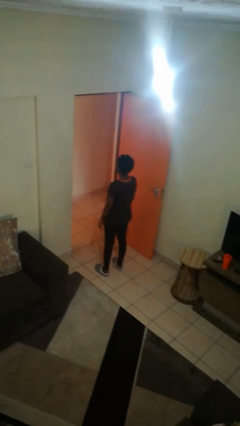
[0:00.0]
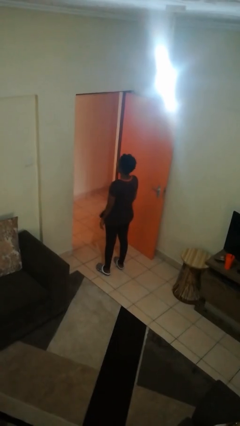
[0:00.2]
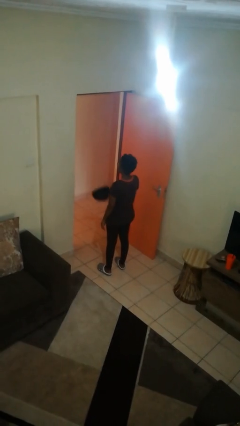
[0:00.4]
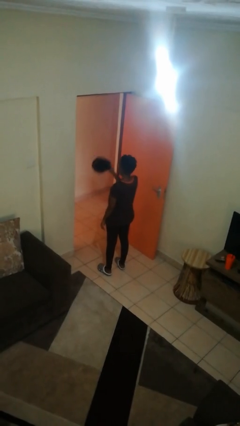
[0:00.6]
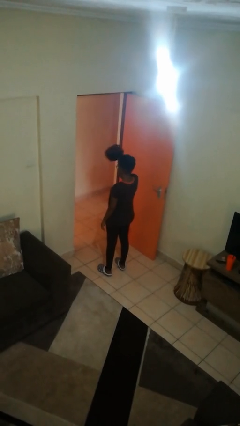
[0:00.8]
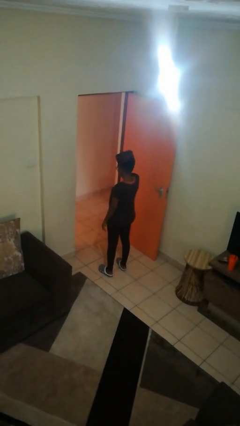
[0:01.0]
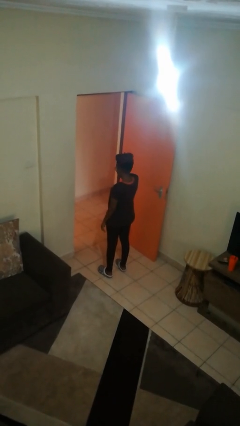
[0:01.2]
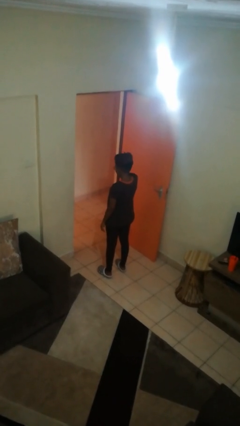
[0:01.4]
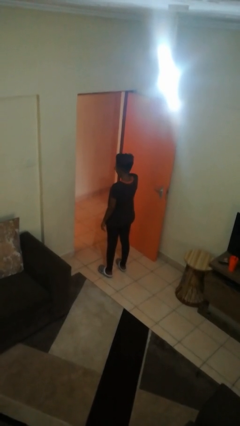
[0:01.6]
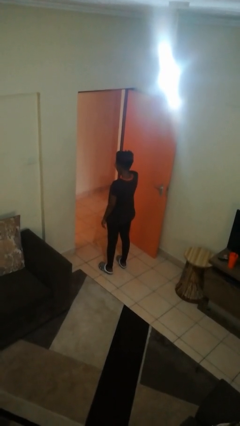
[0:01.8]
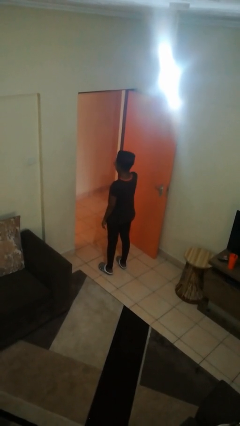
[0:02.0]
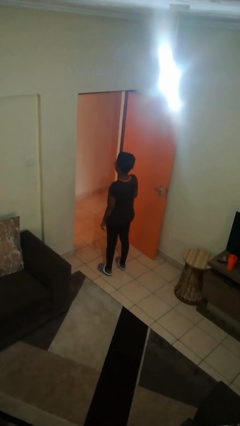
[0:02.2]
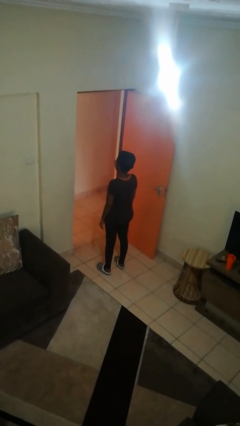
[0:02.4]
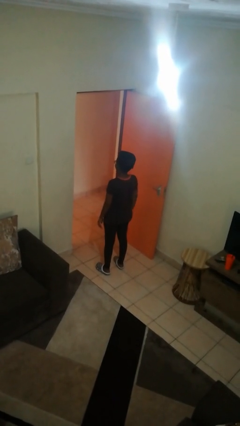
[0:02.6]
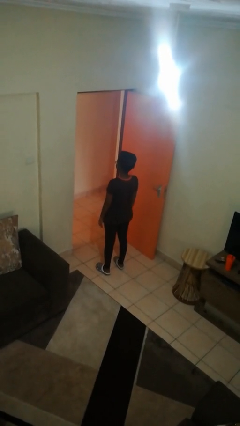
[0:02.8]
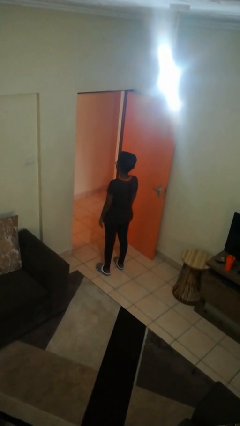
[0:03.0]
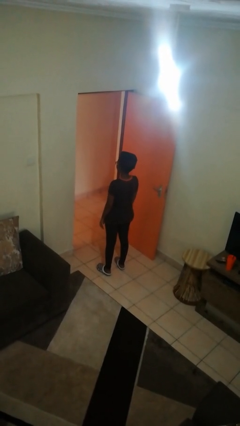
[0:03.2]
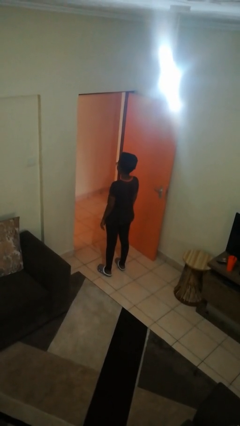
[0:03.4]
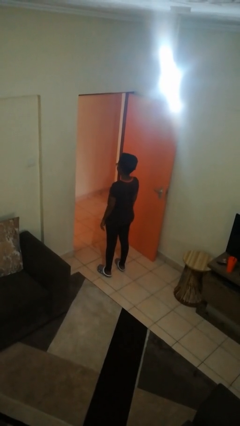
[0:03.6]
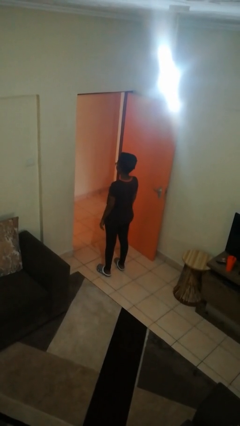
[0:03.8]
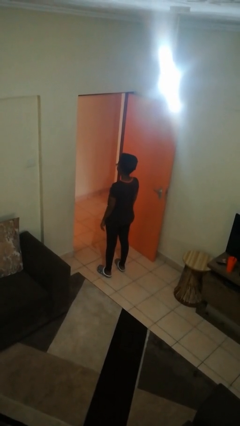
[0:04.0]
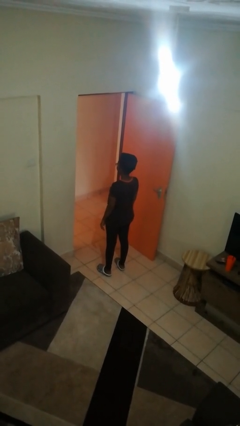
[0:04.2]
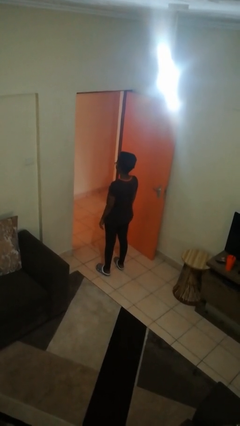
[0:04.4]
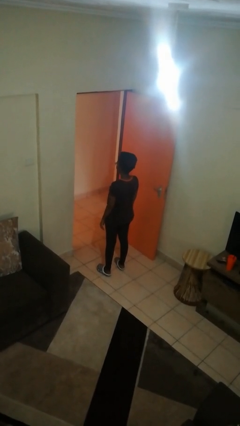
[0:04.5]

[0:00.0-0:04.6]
person puts on hat

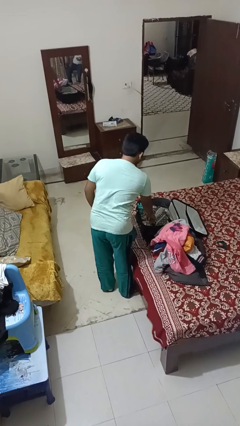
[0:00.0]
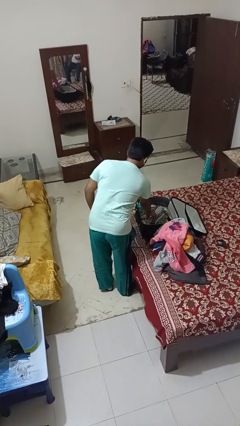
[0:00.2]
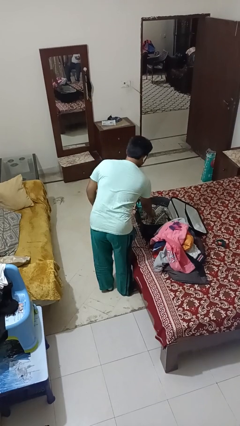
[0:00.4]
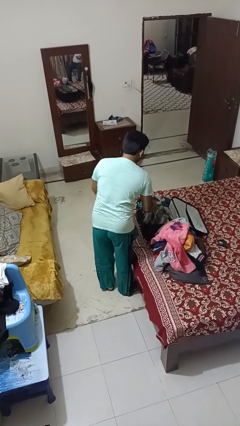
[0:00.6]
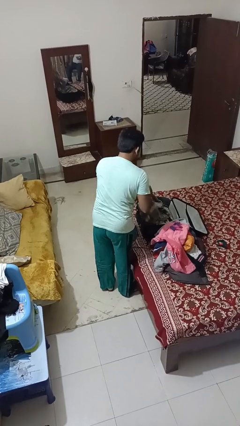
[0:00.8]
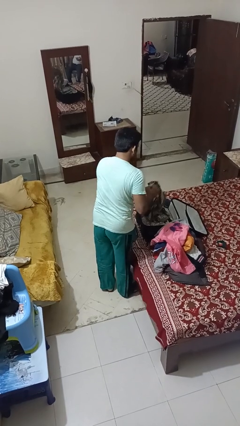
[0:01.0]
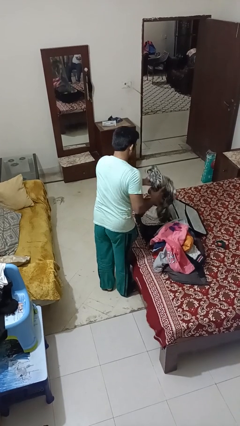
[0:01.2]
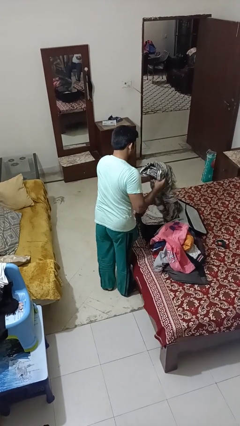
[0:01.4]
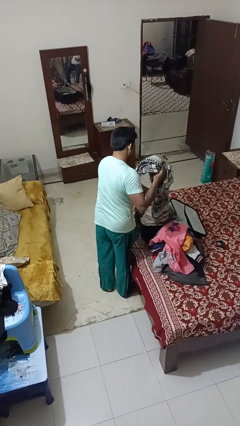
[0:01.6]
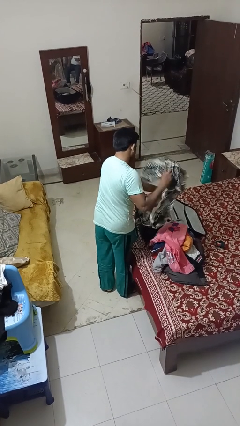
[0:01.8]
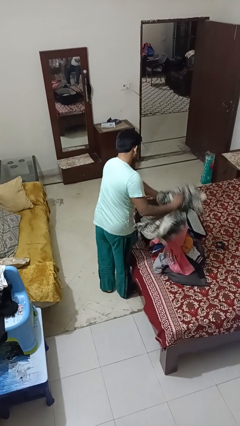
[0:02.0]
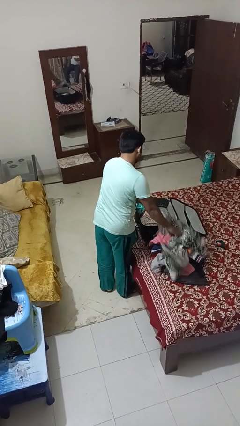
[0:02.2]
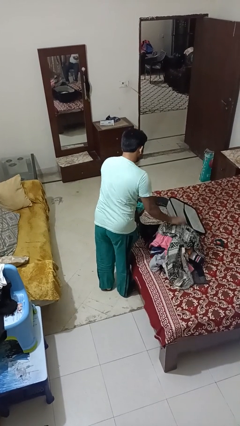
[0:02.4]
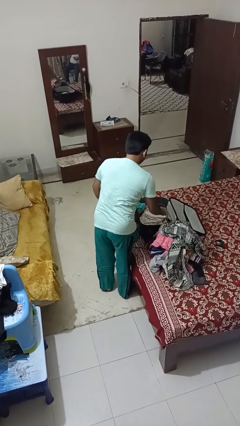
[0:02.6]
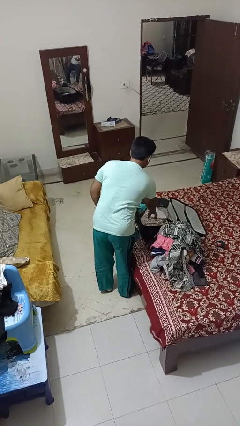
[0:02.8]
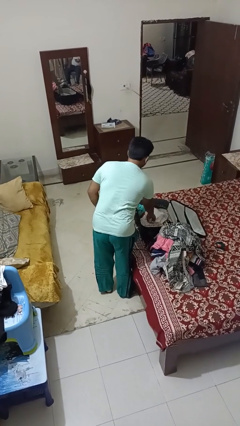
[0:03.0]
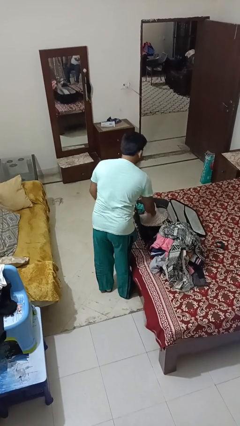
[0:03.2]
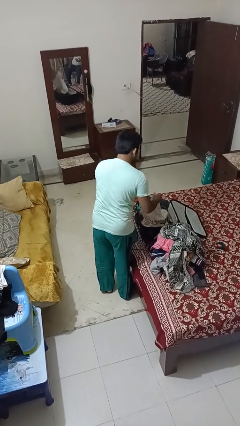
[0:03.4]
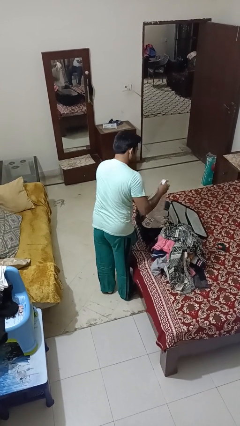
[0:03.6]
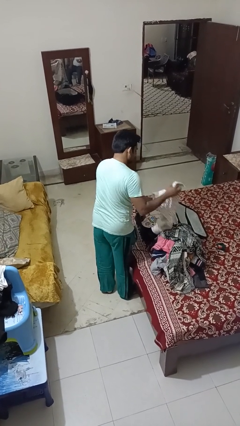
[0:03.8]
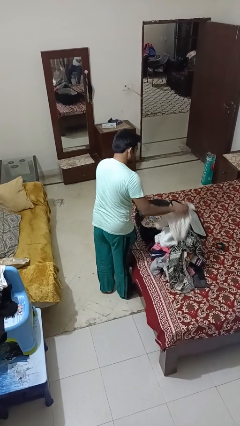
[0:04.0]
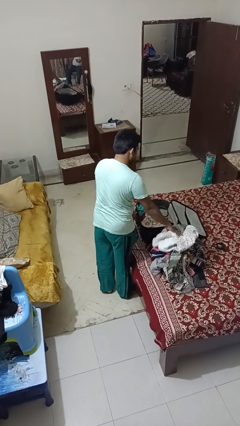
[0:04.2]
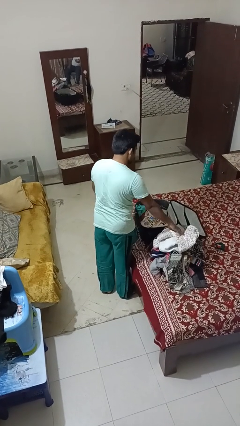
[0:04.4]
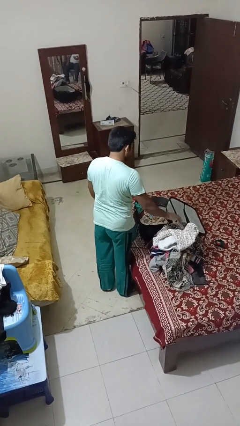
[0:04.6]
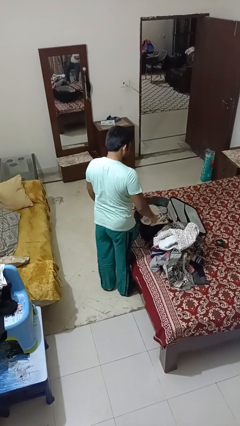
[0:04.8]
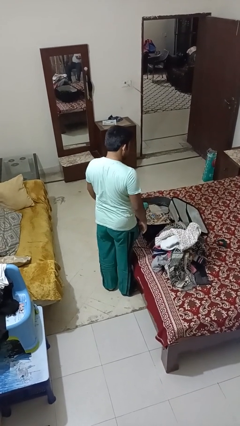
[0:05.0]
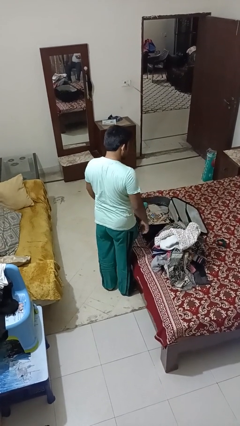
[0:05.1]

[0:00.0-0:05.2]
person unloads clothes from suitcase

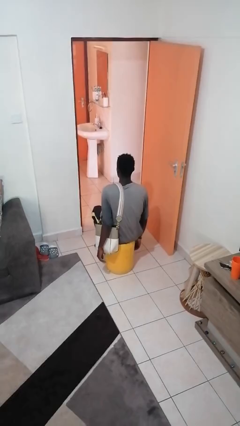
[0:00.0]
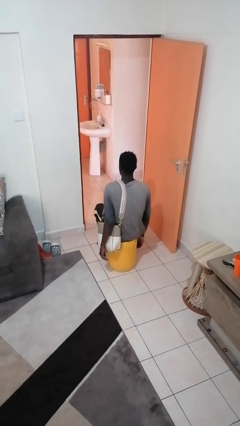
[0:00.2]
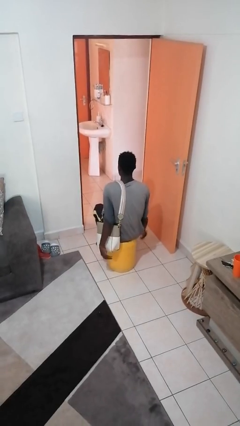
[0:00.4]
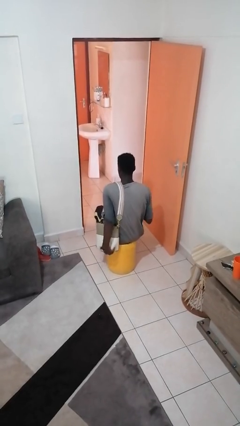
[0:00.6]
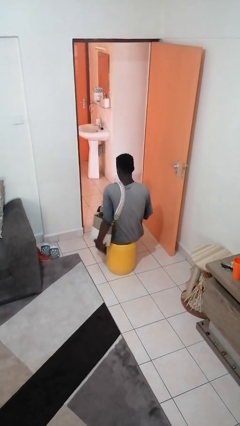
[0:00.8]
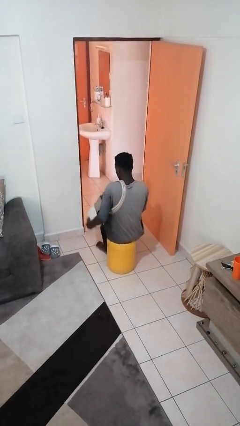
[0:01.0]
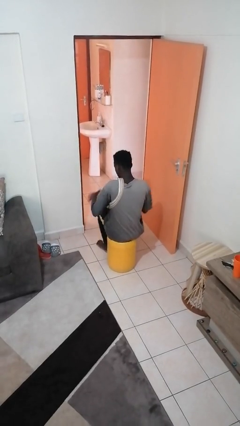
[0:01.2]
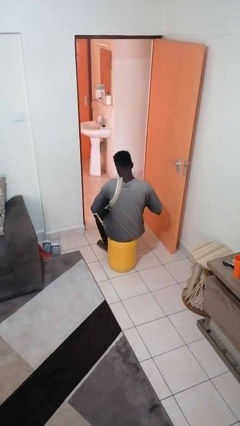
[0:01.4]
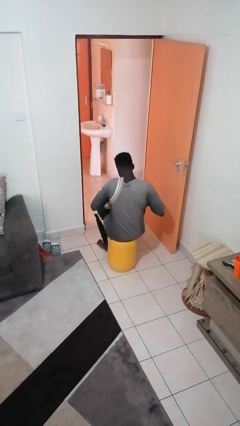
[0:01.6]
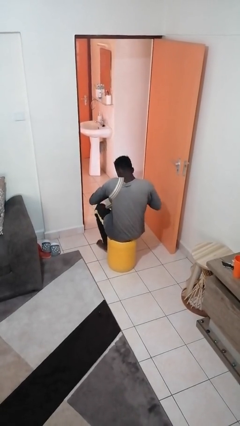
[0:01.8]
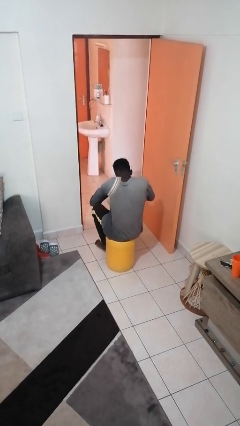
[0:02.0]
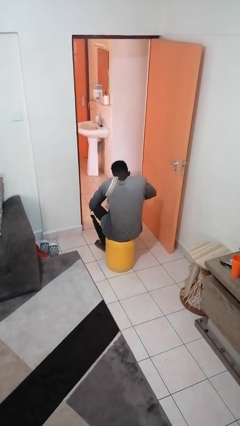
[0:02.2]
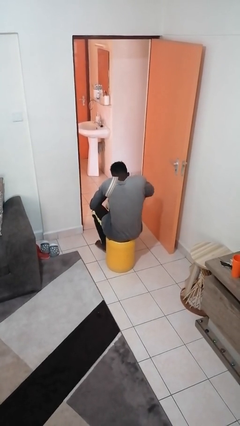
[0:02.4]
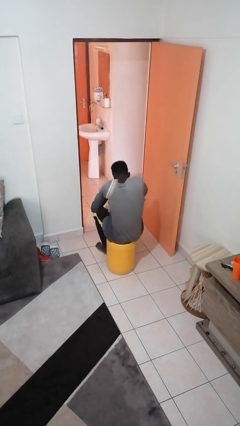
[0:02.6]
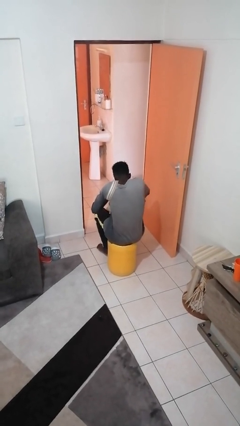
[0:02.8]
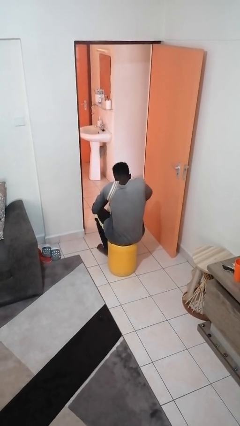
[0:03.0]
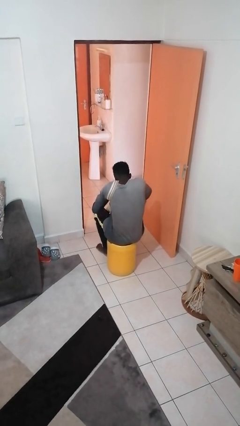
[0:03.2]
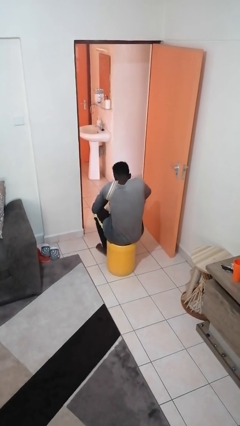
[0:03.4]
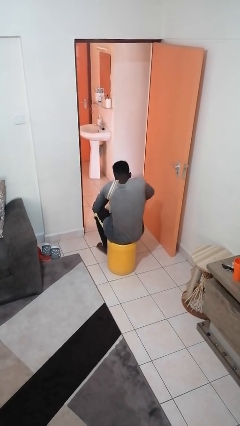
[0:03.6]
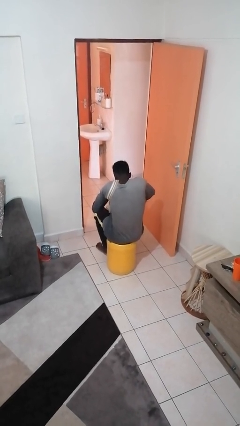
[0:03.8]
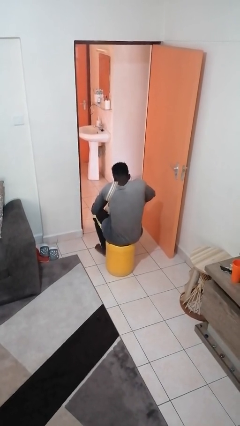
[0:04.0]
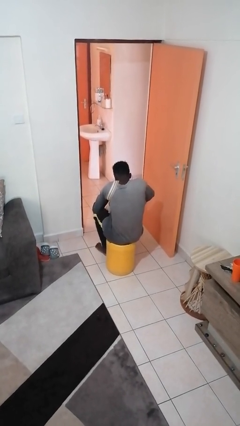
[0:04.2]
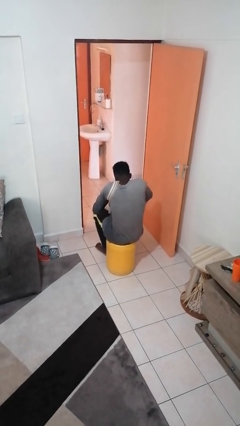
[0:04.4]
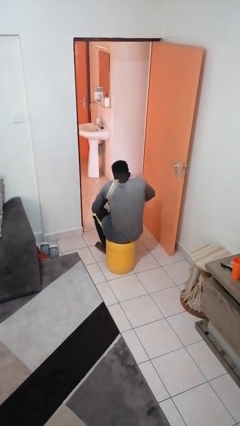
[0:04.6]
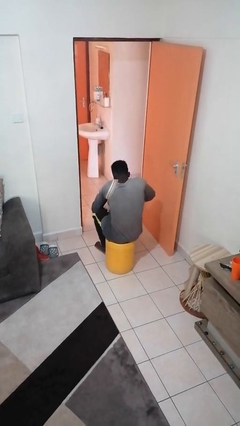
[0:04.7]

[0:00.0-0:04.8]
person searches in purse

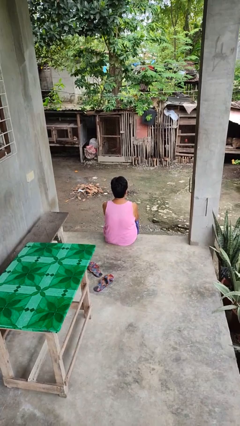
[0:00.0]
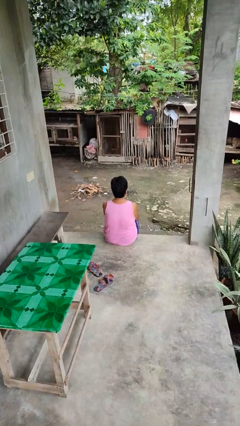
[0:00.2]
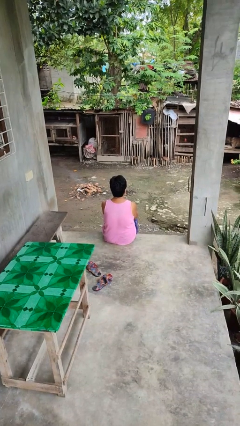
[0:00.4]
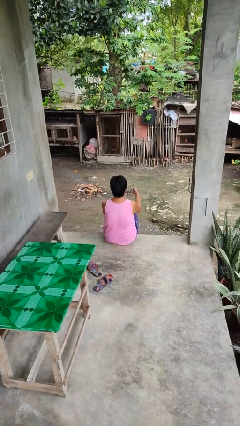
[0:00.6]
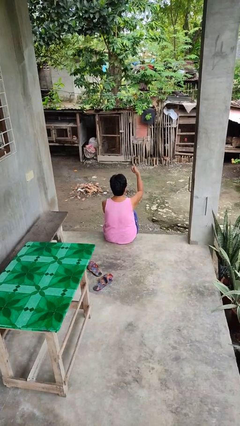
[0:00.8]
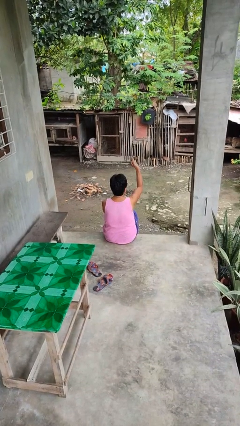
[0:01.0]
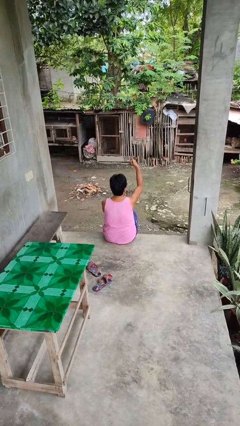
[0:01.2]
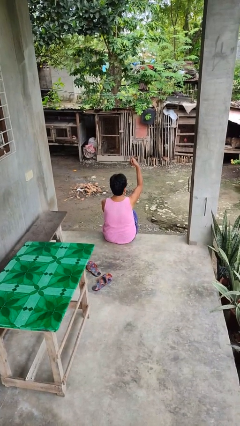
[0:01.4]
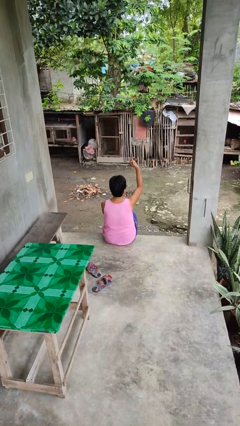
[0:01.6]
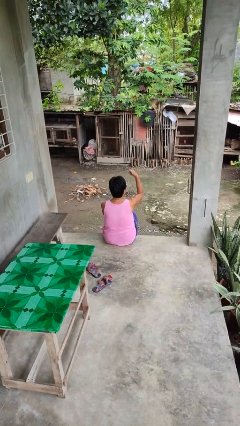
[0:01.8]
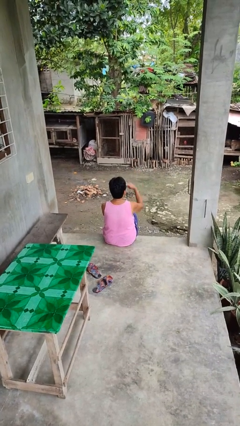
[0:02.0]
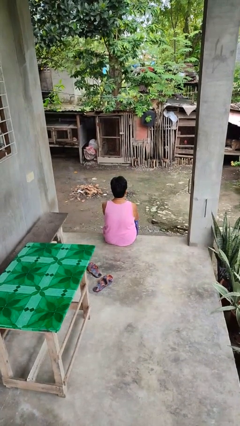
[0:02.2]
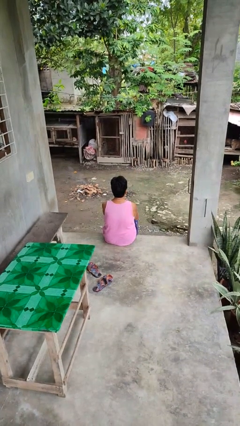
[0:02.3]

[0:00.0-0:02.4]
person gestures thumbs up

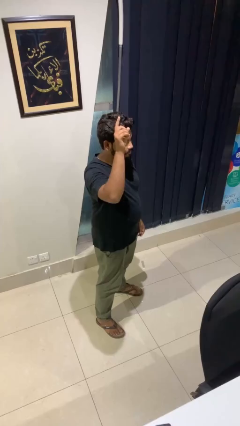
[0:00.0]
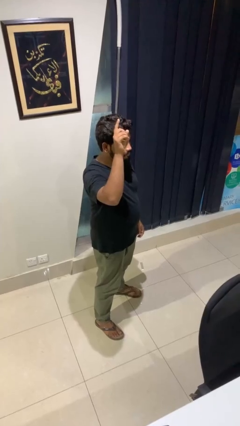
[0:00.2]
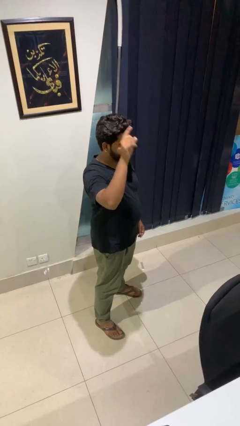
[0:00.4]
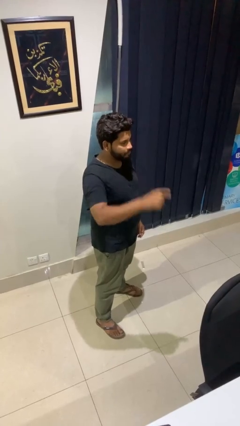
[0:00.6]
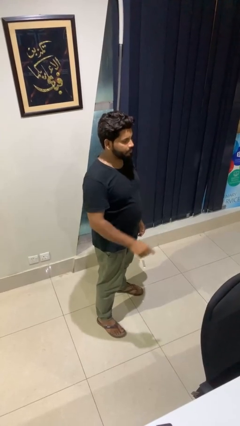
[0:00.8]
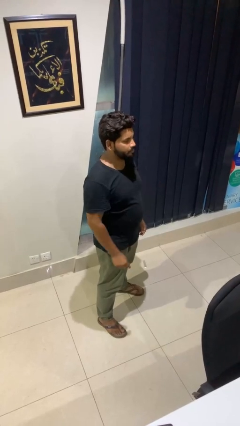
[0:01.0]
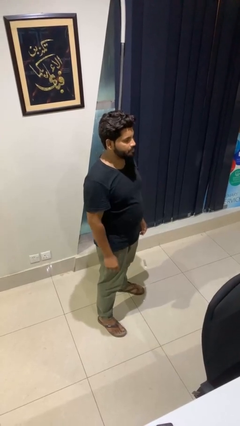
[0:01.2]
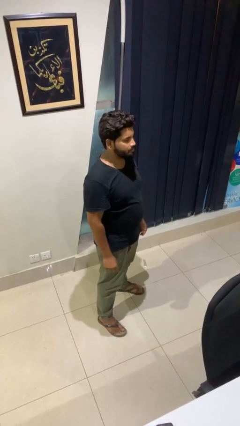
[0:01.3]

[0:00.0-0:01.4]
person gestures lower hand
